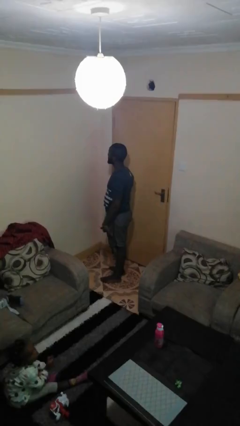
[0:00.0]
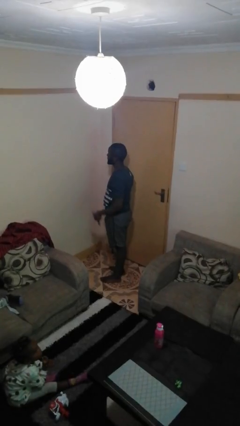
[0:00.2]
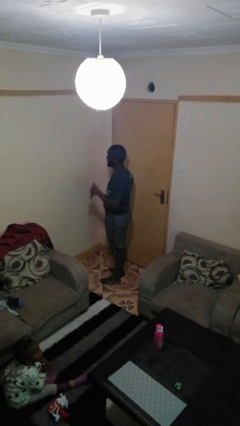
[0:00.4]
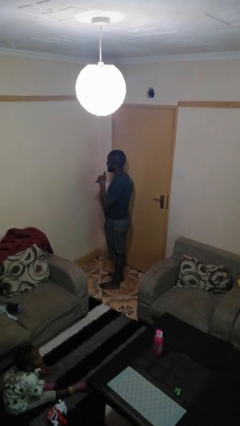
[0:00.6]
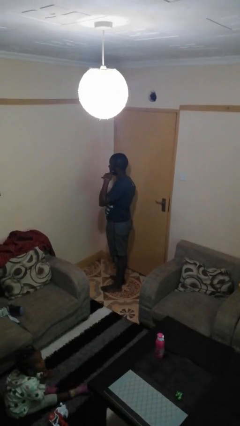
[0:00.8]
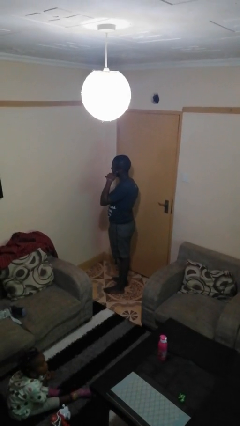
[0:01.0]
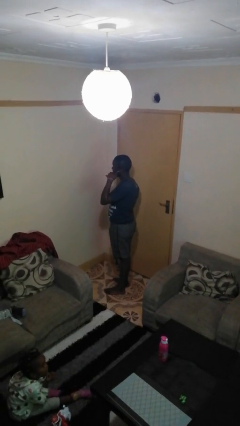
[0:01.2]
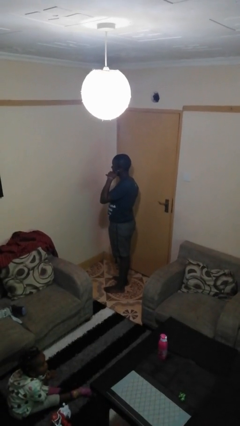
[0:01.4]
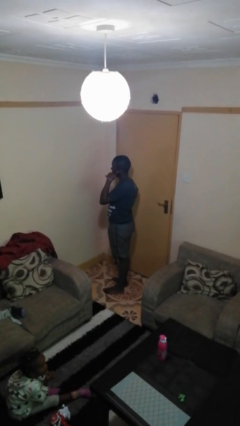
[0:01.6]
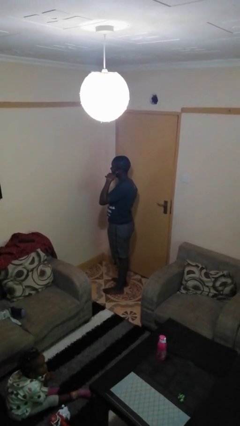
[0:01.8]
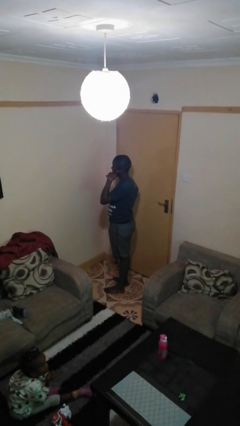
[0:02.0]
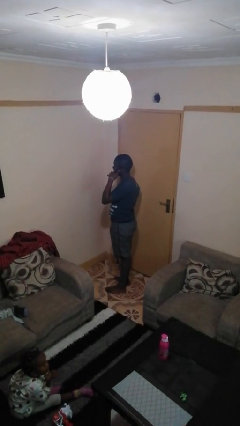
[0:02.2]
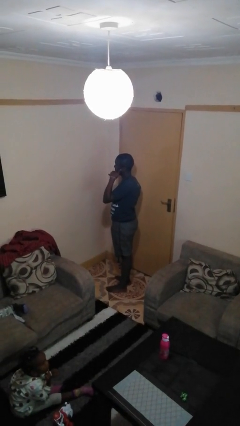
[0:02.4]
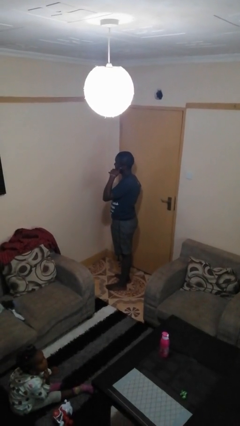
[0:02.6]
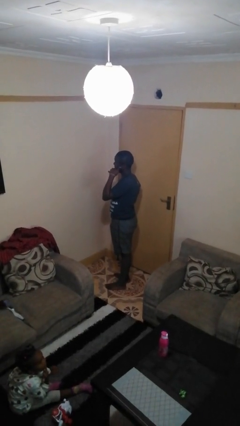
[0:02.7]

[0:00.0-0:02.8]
person gestures call me

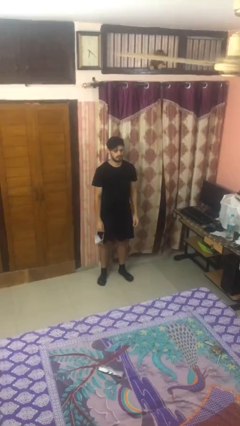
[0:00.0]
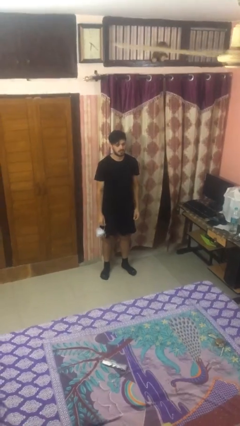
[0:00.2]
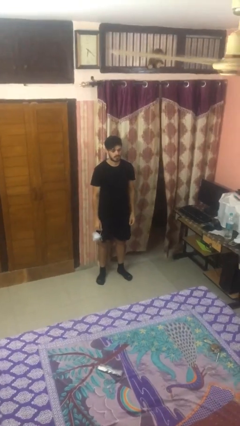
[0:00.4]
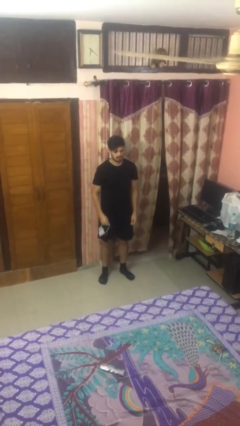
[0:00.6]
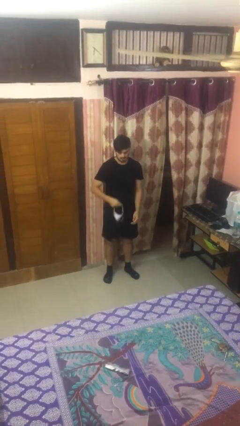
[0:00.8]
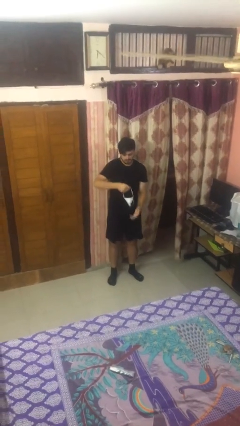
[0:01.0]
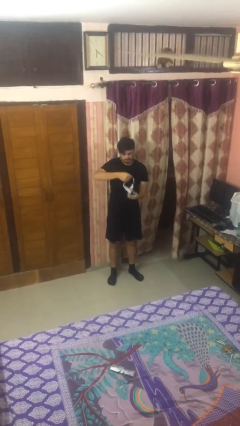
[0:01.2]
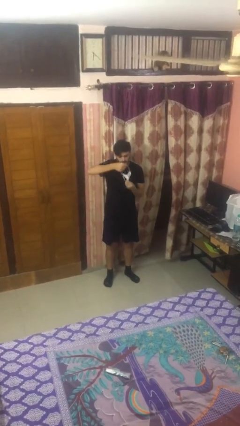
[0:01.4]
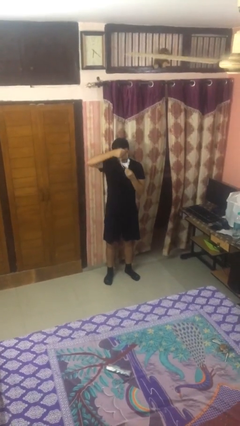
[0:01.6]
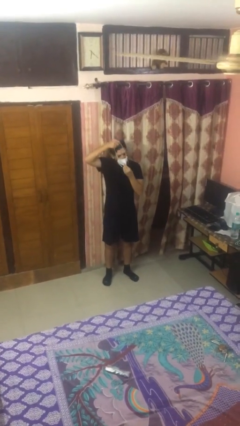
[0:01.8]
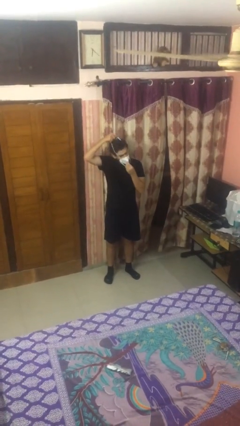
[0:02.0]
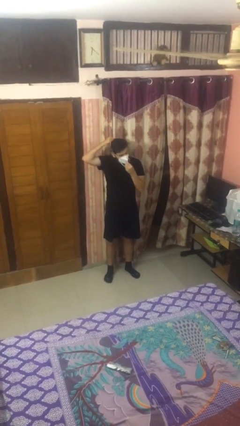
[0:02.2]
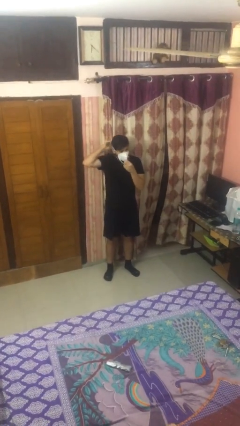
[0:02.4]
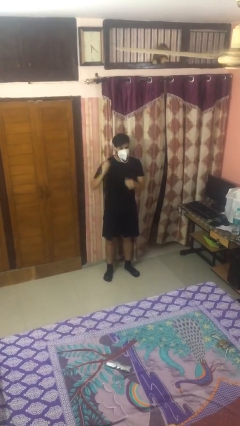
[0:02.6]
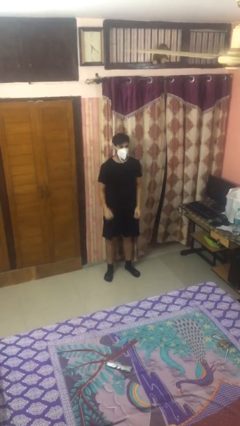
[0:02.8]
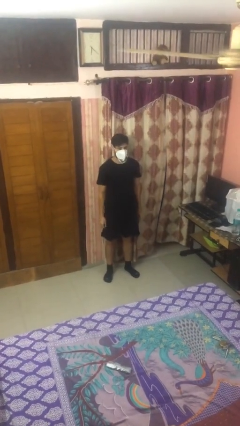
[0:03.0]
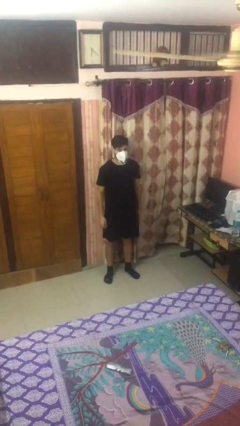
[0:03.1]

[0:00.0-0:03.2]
person puts on facemask

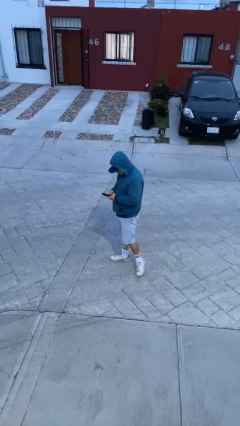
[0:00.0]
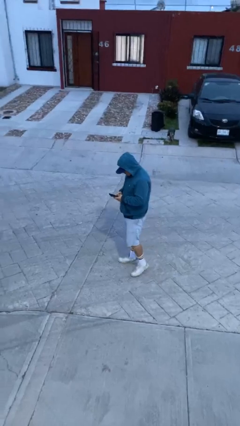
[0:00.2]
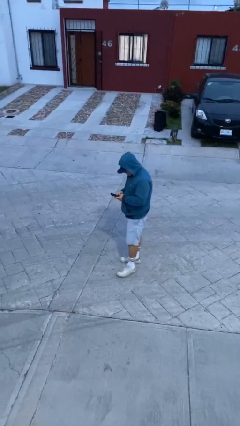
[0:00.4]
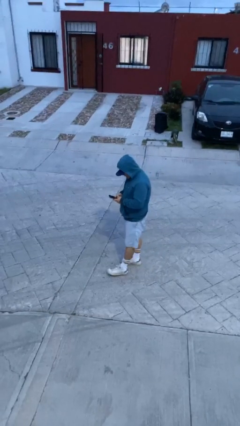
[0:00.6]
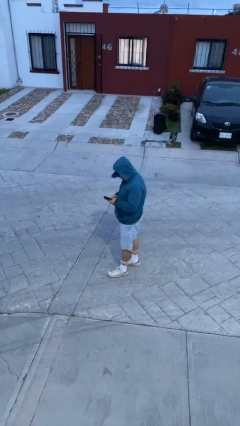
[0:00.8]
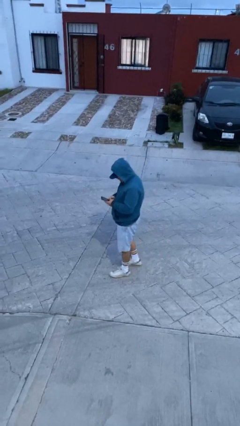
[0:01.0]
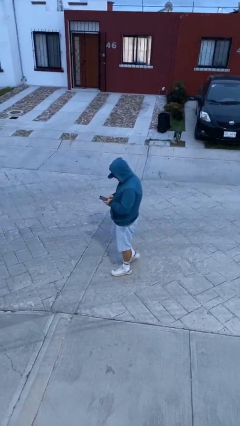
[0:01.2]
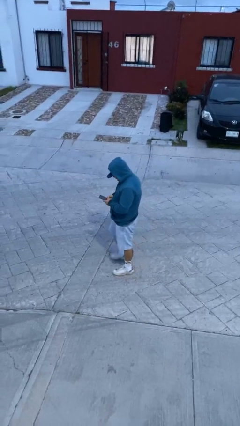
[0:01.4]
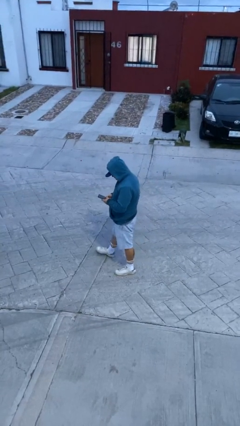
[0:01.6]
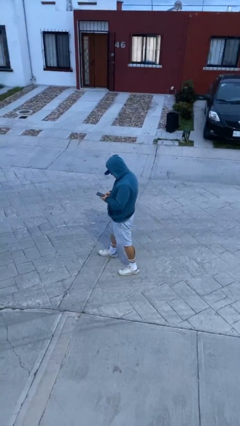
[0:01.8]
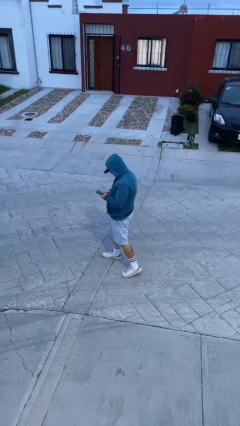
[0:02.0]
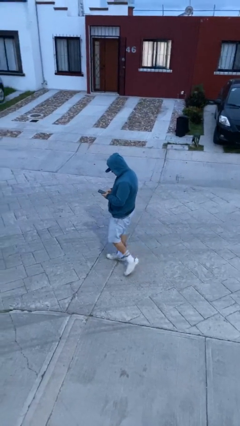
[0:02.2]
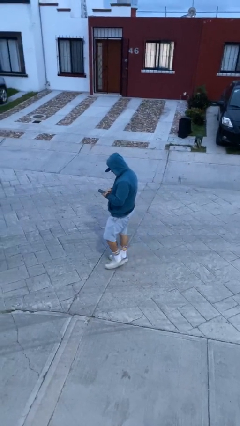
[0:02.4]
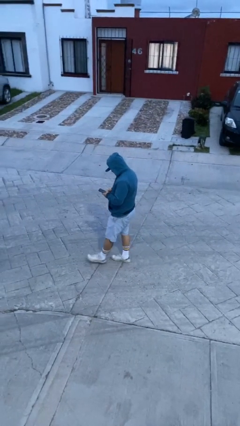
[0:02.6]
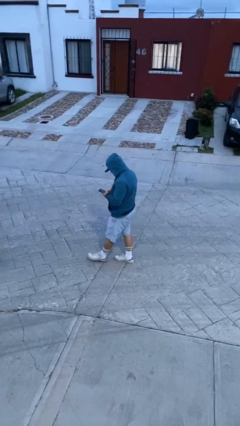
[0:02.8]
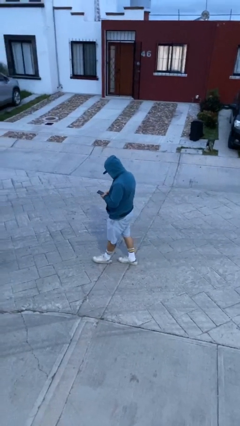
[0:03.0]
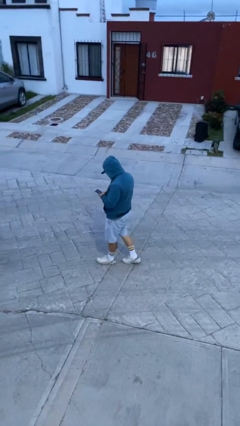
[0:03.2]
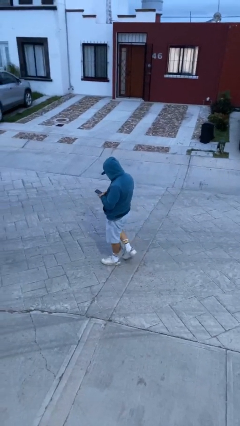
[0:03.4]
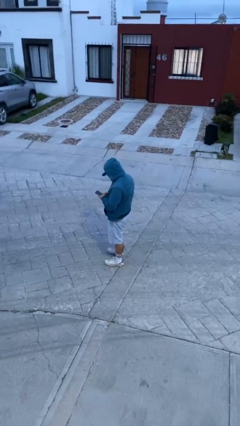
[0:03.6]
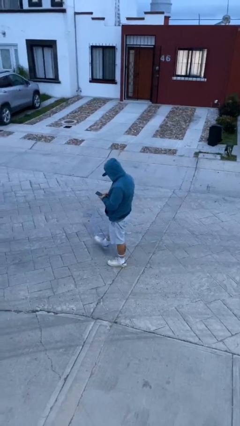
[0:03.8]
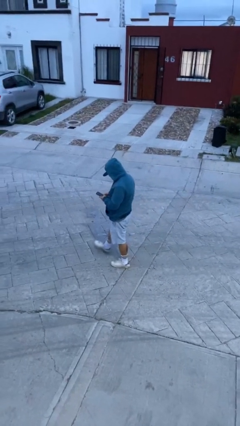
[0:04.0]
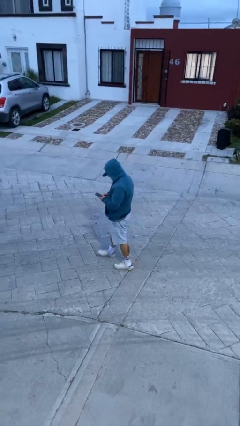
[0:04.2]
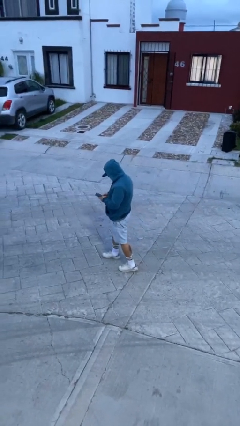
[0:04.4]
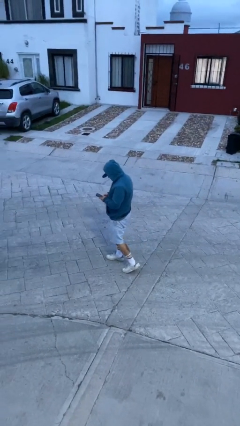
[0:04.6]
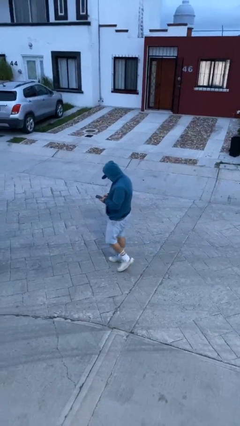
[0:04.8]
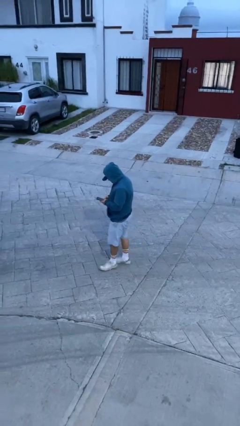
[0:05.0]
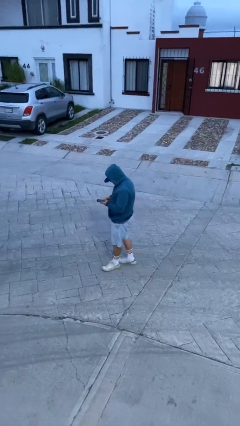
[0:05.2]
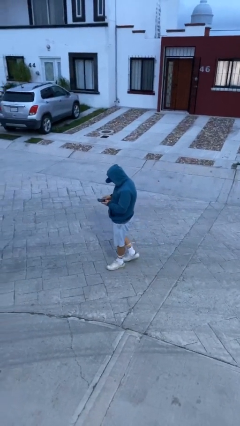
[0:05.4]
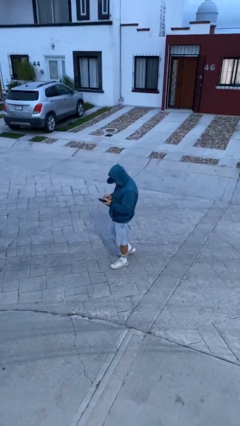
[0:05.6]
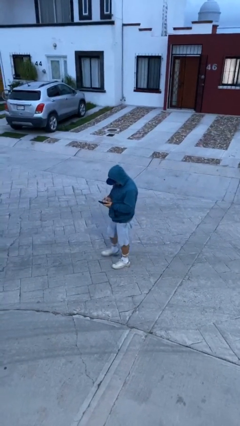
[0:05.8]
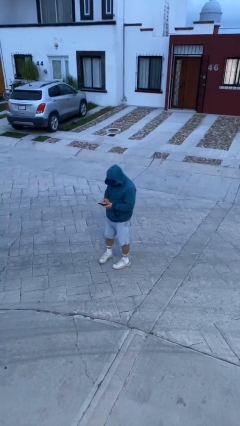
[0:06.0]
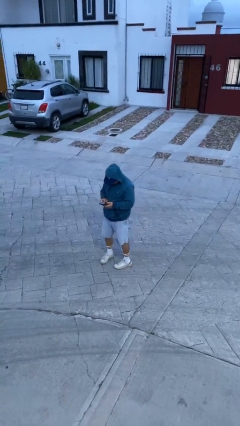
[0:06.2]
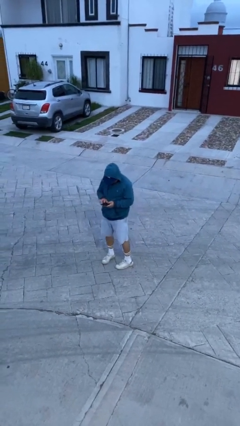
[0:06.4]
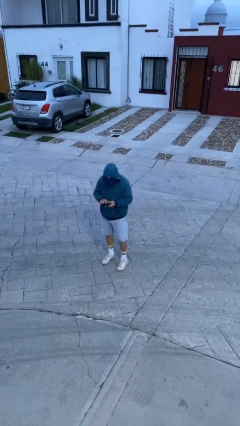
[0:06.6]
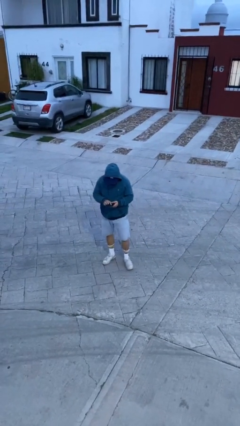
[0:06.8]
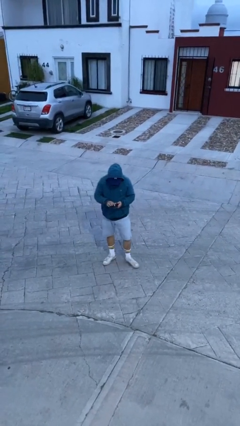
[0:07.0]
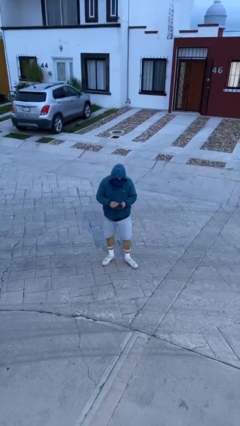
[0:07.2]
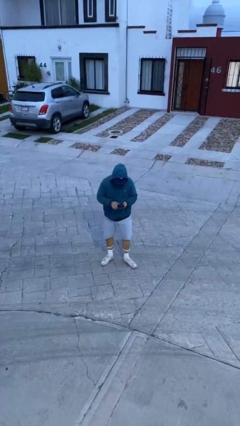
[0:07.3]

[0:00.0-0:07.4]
person texts on phone

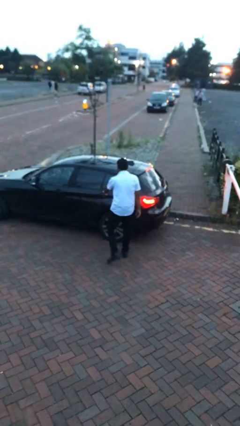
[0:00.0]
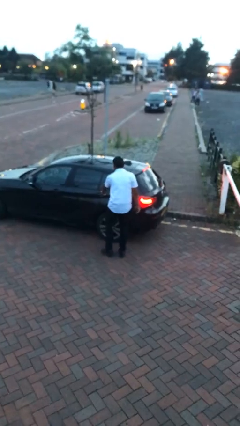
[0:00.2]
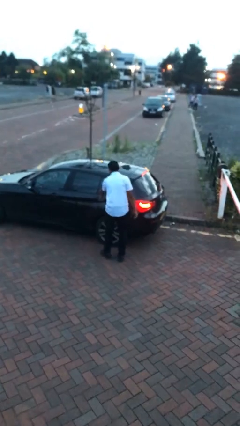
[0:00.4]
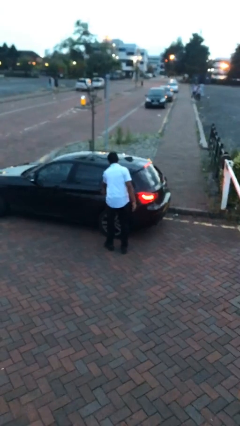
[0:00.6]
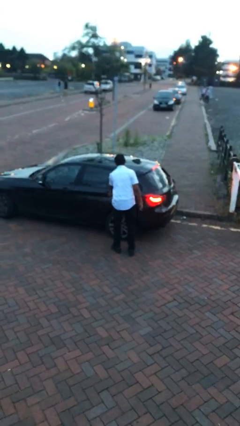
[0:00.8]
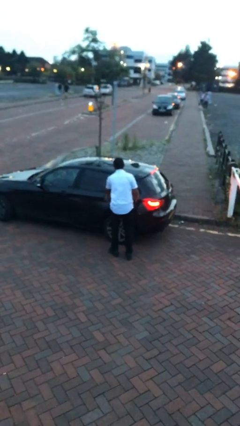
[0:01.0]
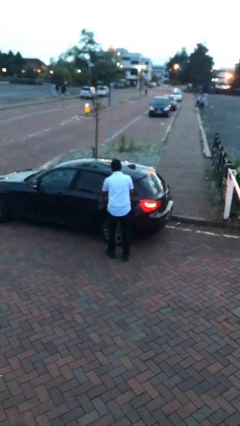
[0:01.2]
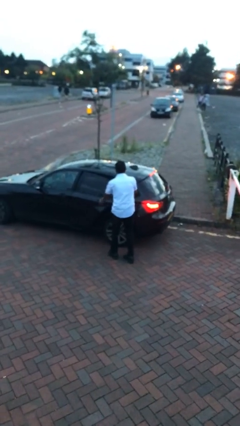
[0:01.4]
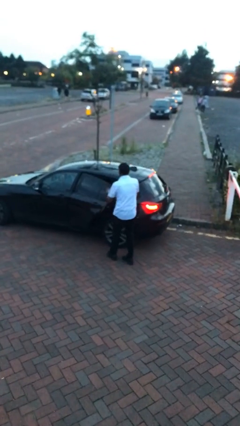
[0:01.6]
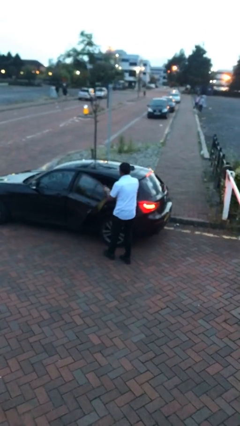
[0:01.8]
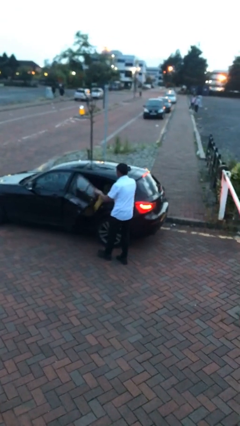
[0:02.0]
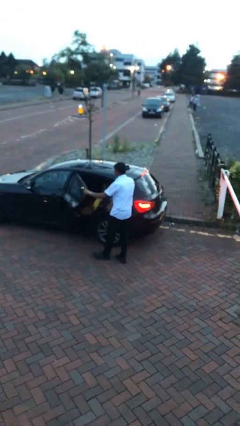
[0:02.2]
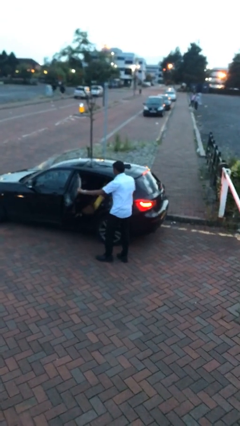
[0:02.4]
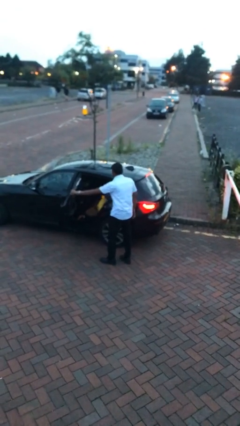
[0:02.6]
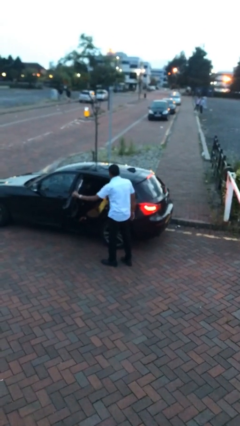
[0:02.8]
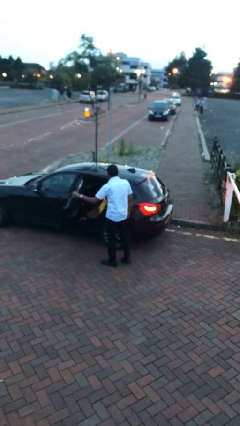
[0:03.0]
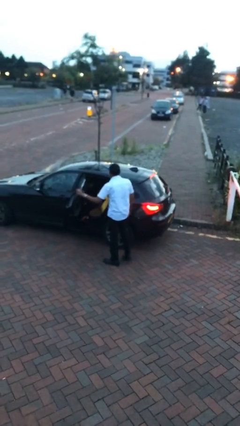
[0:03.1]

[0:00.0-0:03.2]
person opens car door

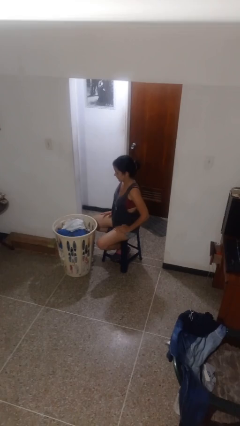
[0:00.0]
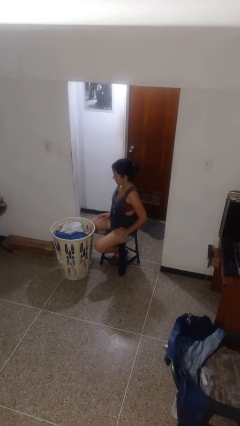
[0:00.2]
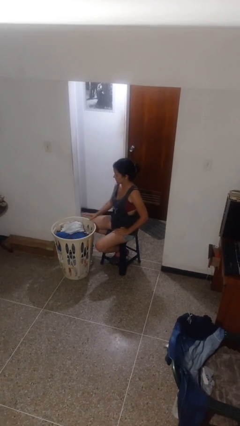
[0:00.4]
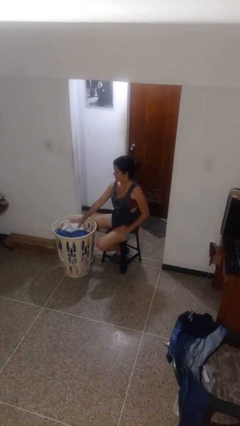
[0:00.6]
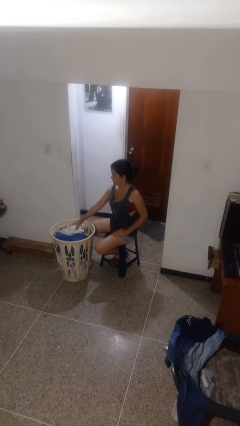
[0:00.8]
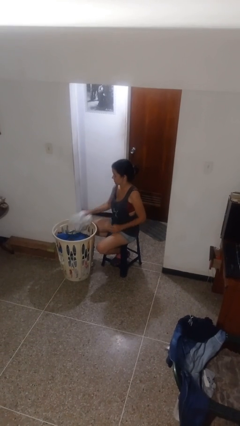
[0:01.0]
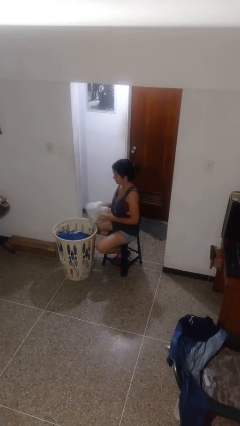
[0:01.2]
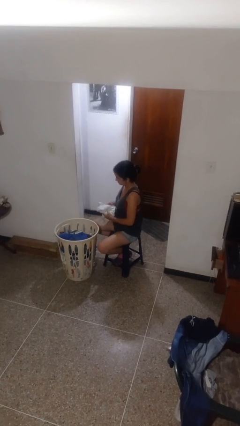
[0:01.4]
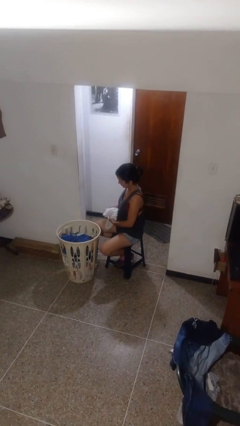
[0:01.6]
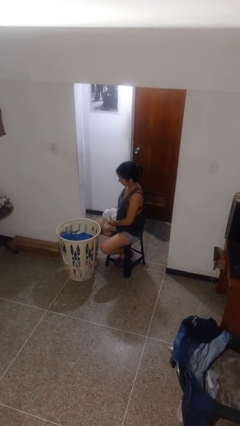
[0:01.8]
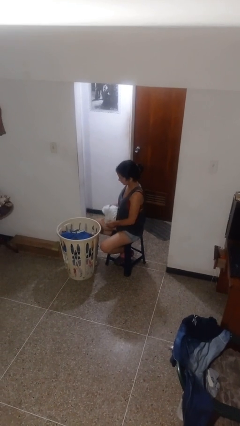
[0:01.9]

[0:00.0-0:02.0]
person takes object from basket
